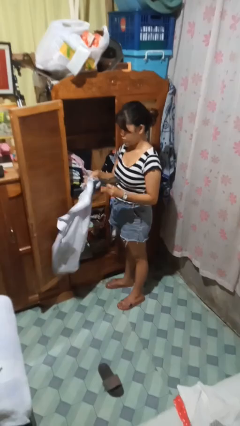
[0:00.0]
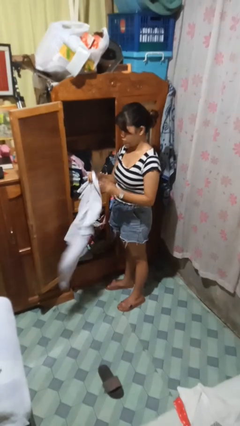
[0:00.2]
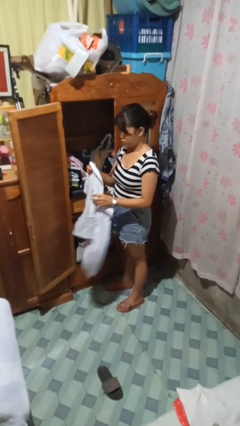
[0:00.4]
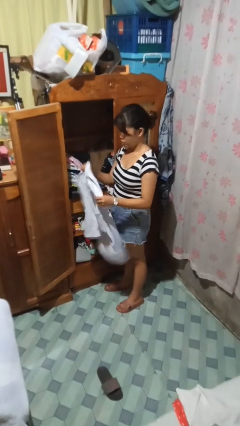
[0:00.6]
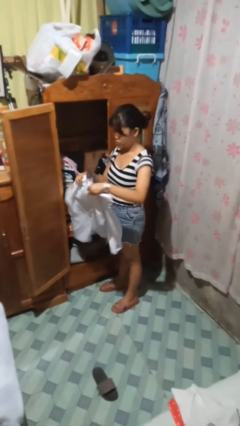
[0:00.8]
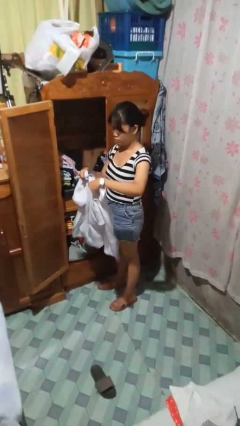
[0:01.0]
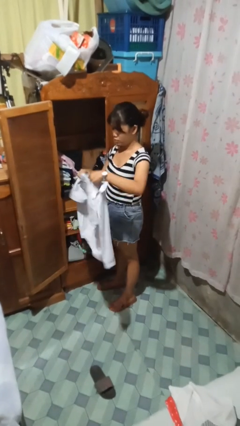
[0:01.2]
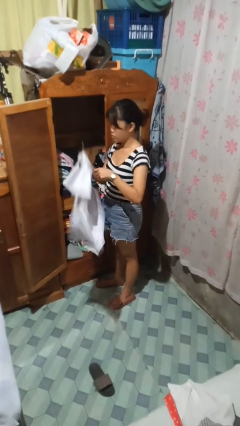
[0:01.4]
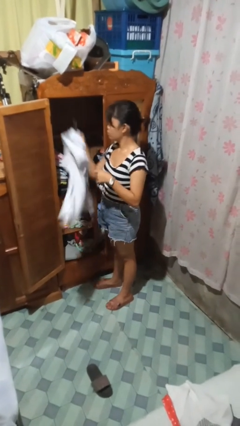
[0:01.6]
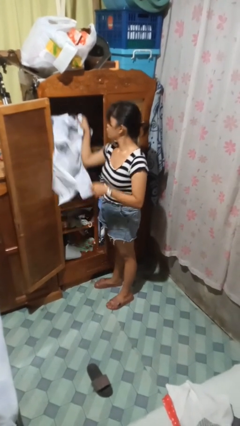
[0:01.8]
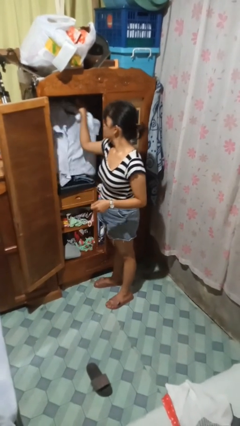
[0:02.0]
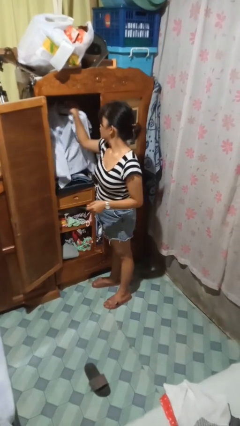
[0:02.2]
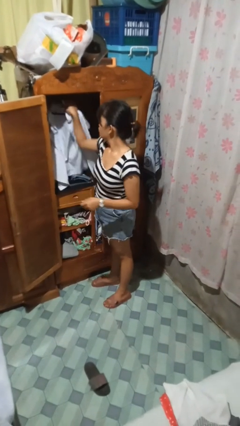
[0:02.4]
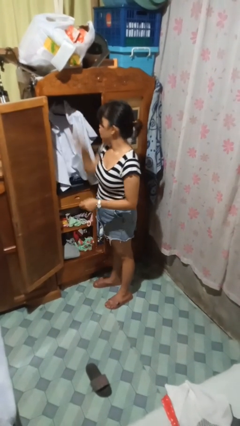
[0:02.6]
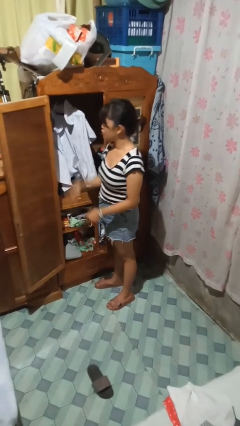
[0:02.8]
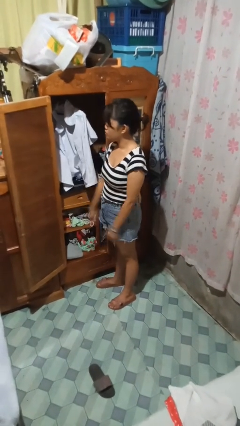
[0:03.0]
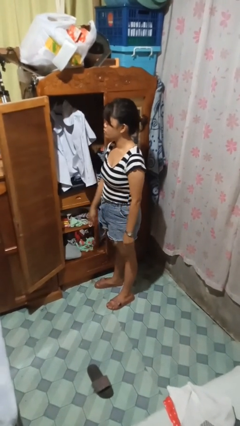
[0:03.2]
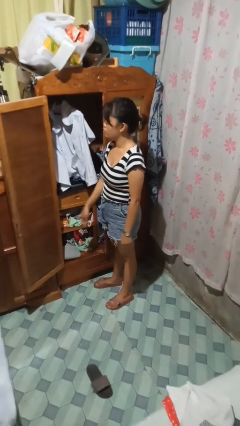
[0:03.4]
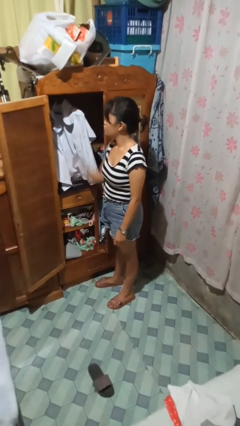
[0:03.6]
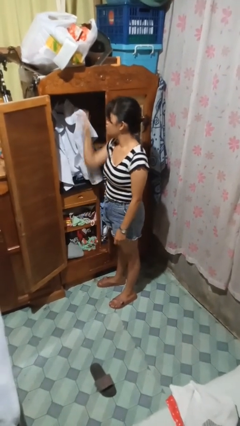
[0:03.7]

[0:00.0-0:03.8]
person puts clothes into closet

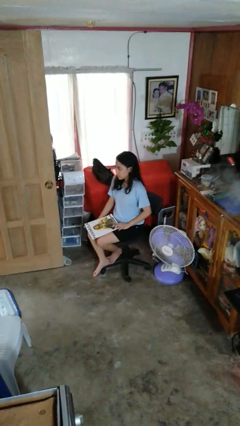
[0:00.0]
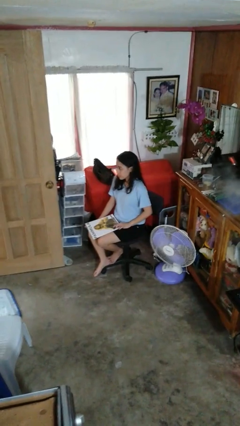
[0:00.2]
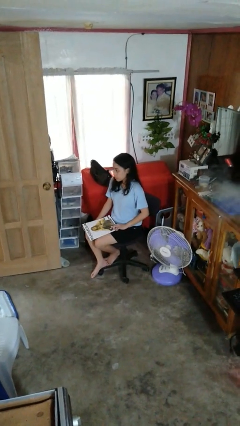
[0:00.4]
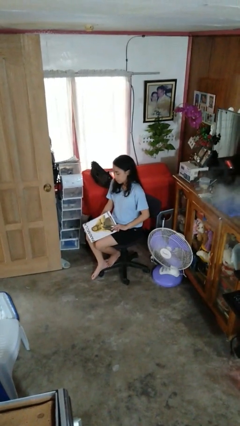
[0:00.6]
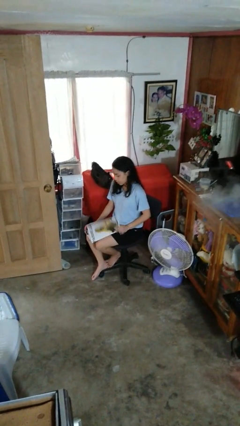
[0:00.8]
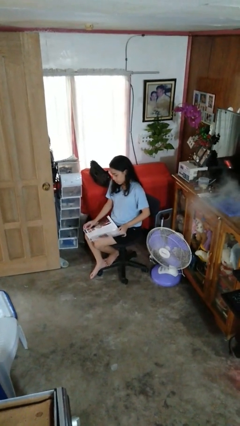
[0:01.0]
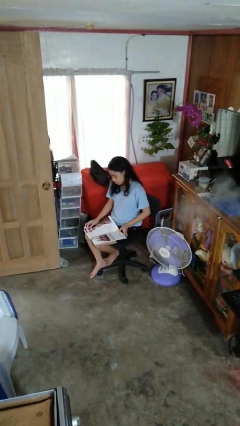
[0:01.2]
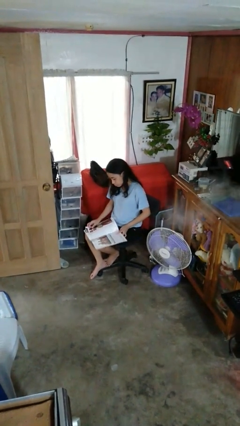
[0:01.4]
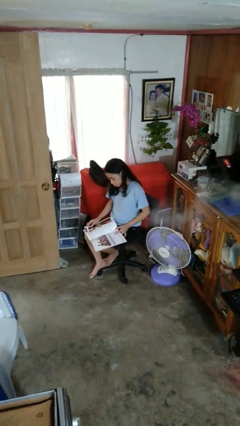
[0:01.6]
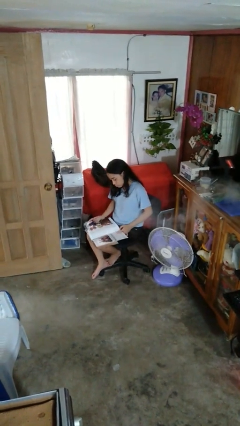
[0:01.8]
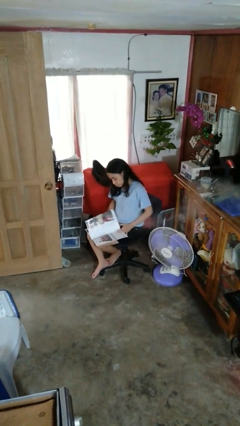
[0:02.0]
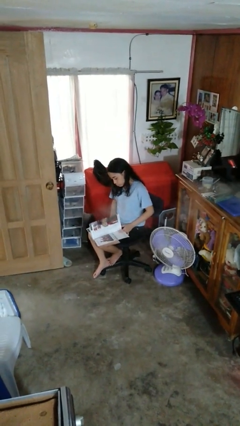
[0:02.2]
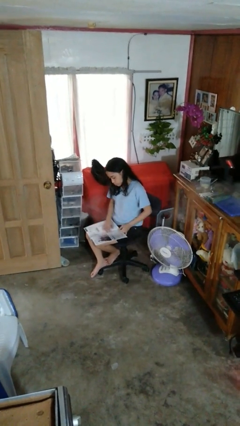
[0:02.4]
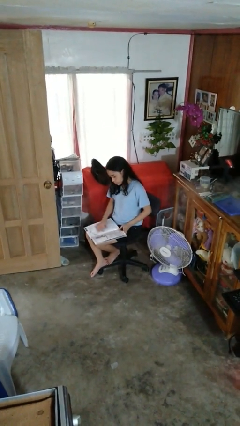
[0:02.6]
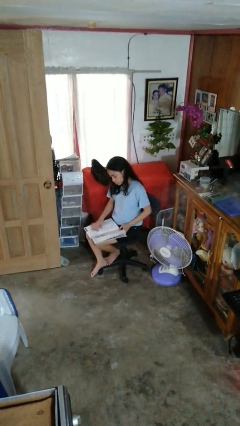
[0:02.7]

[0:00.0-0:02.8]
person reads magazine

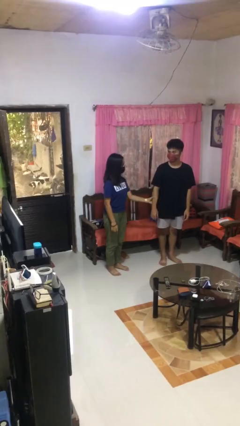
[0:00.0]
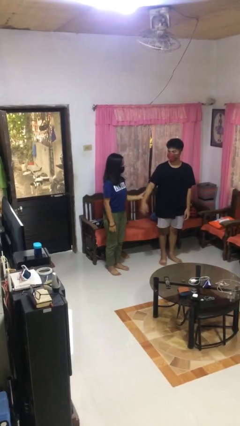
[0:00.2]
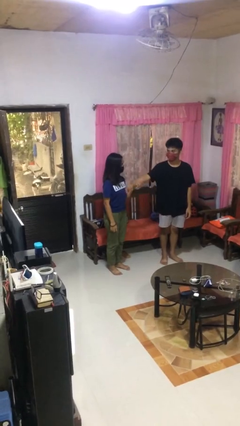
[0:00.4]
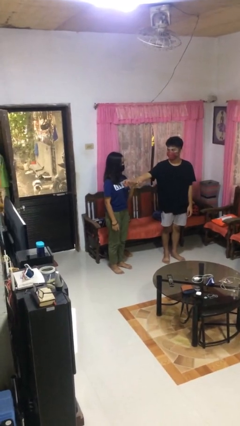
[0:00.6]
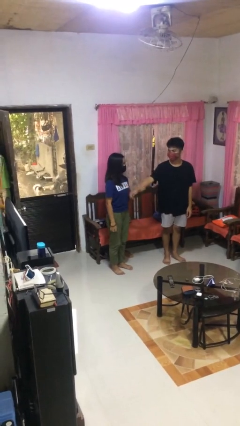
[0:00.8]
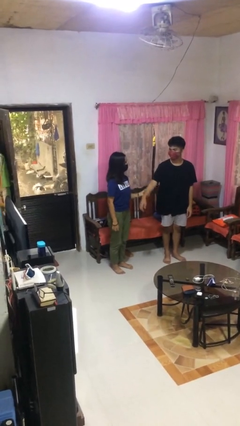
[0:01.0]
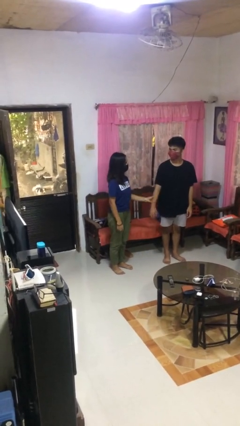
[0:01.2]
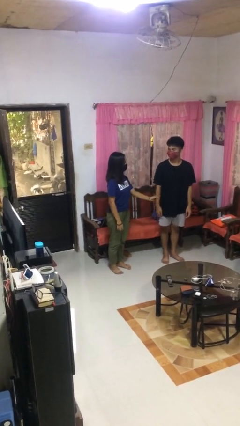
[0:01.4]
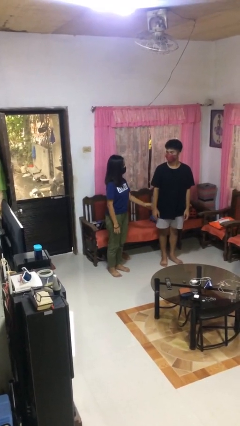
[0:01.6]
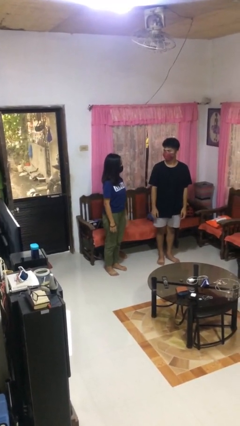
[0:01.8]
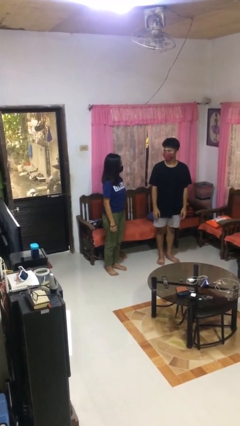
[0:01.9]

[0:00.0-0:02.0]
person grabs person by forearm

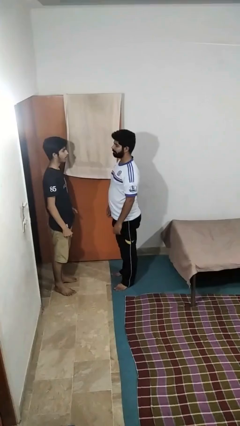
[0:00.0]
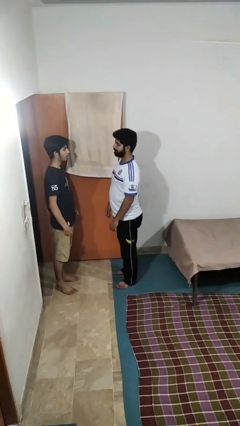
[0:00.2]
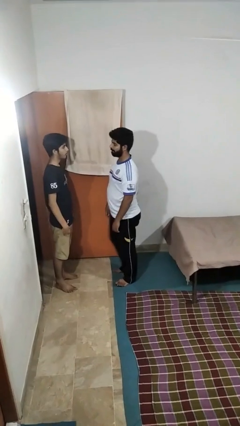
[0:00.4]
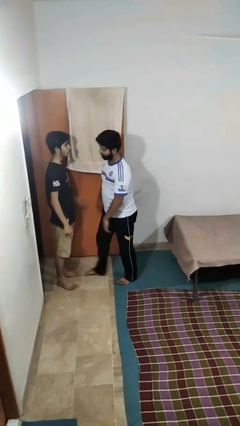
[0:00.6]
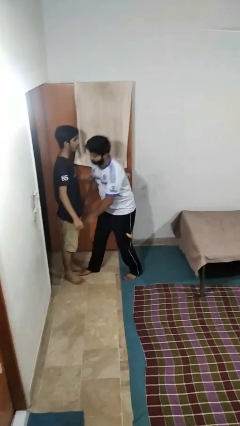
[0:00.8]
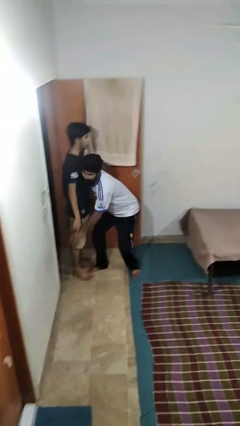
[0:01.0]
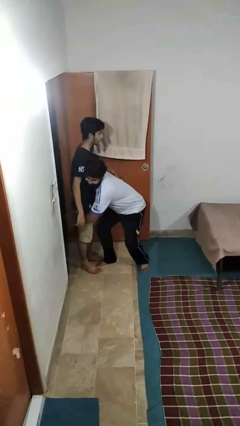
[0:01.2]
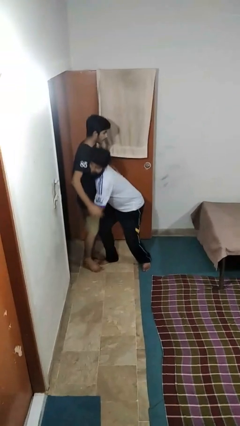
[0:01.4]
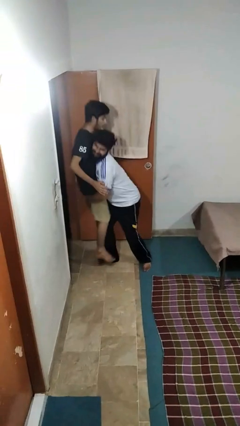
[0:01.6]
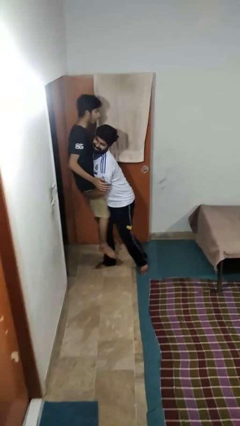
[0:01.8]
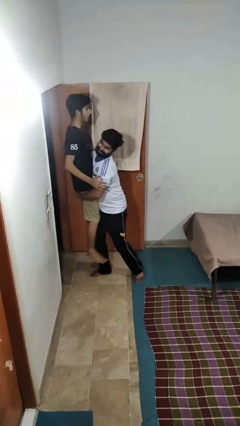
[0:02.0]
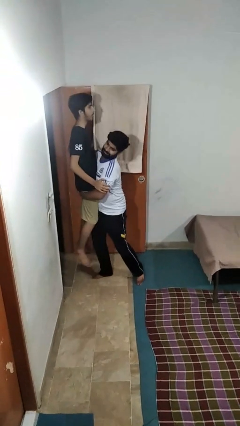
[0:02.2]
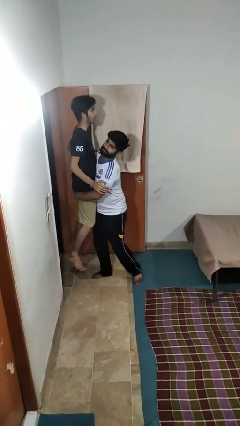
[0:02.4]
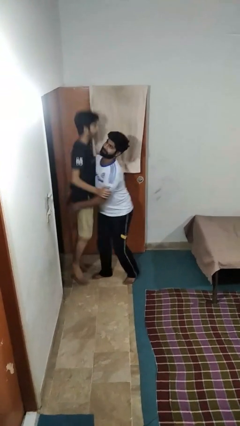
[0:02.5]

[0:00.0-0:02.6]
person picks up person

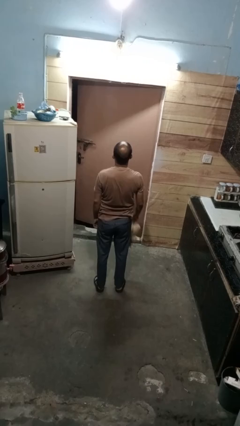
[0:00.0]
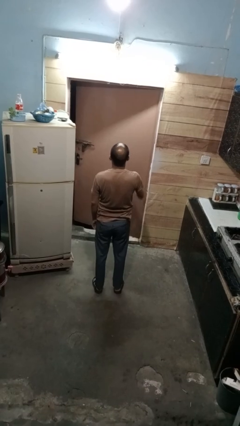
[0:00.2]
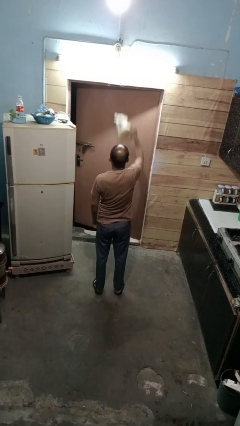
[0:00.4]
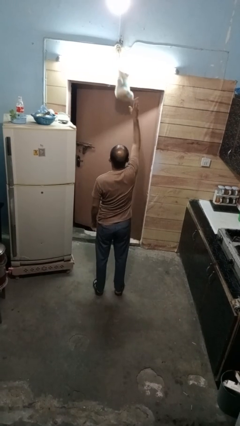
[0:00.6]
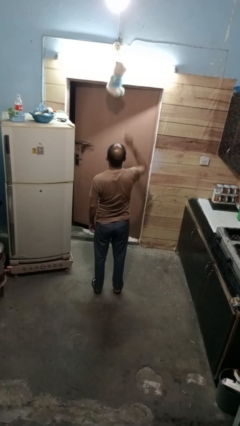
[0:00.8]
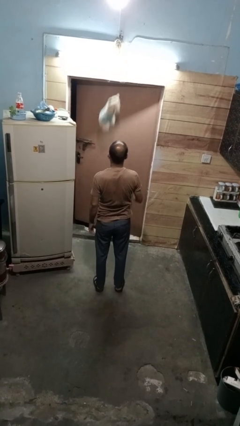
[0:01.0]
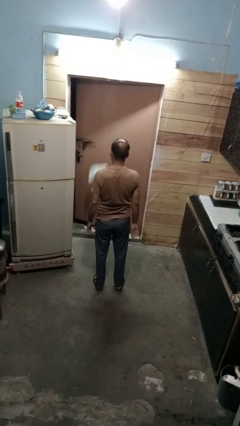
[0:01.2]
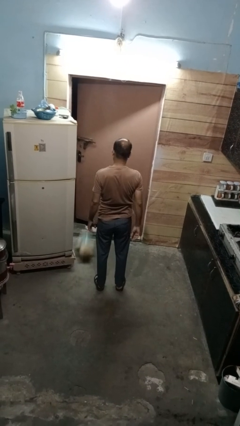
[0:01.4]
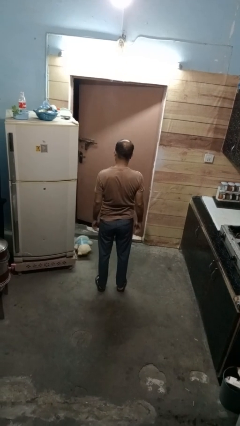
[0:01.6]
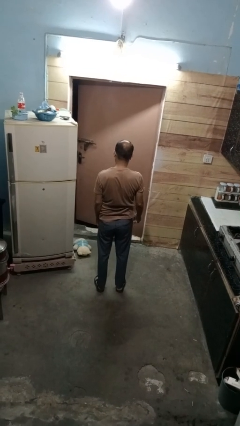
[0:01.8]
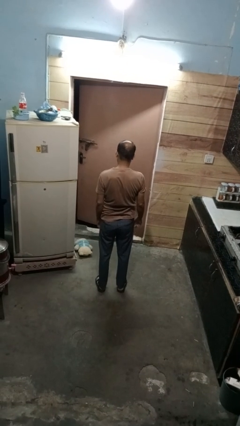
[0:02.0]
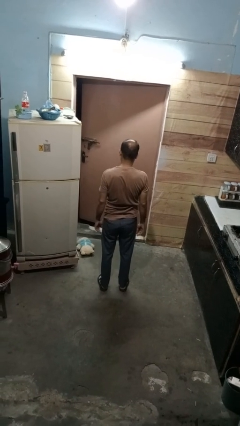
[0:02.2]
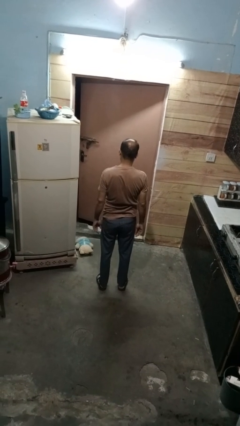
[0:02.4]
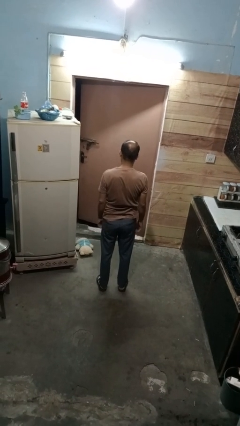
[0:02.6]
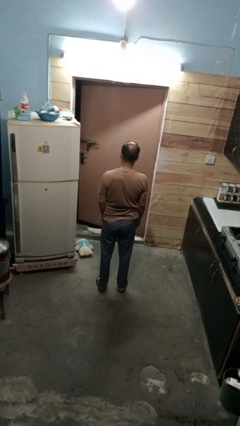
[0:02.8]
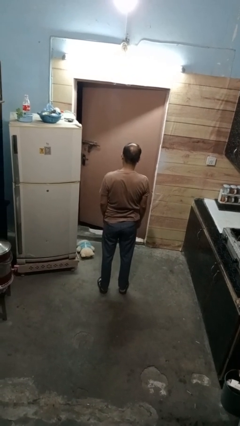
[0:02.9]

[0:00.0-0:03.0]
person throws object into air

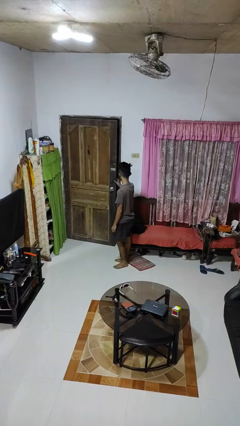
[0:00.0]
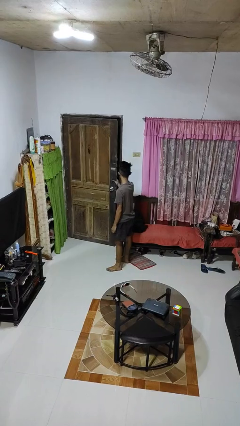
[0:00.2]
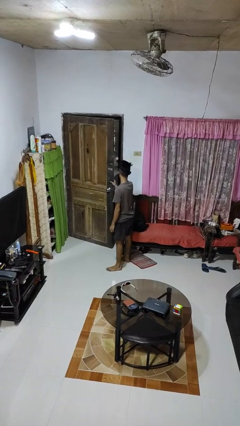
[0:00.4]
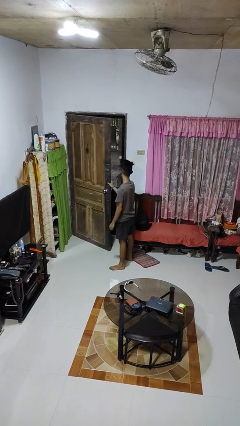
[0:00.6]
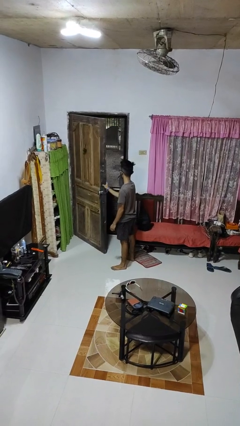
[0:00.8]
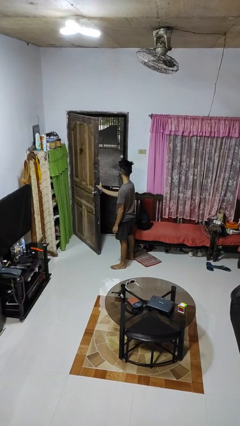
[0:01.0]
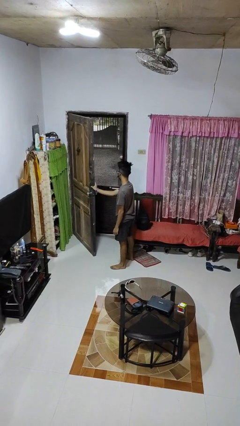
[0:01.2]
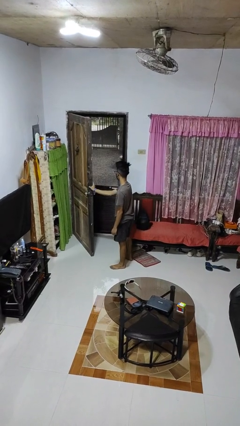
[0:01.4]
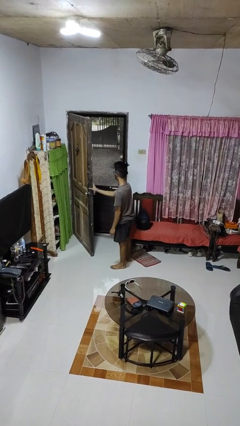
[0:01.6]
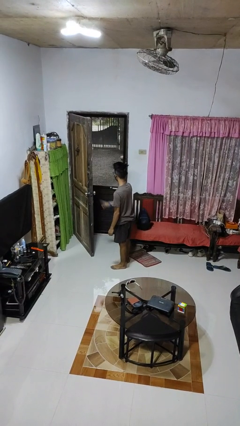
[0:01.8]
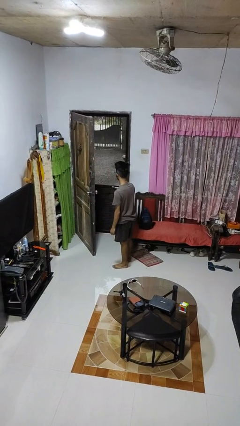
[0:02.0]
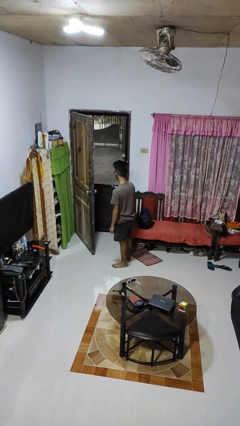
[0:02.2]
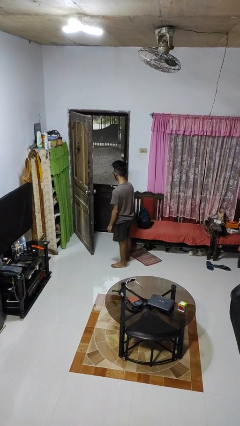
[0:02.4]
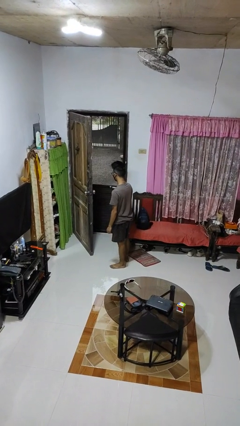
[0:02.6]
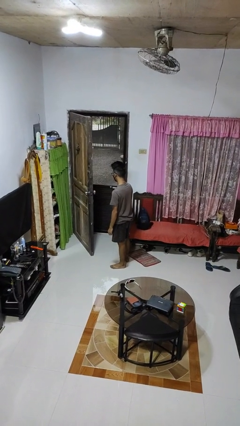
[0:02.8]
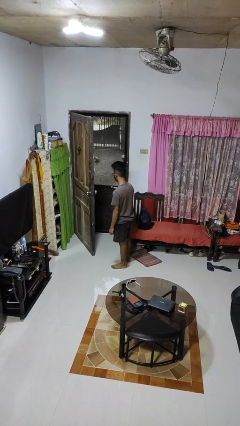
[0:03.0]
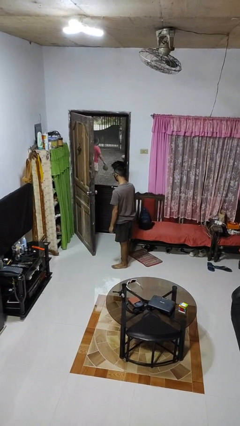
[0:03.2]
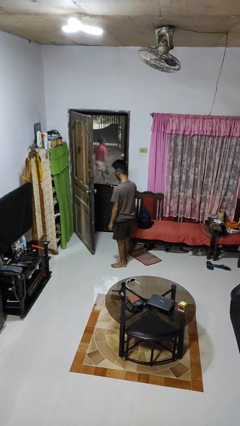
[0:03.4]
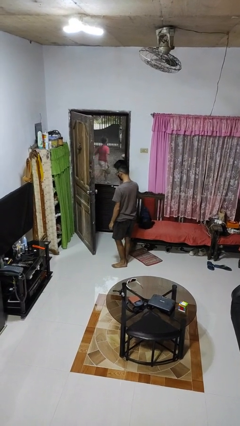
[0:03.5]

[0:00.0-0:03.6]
person opens facility door
